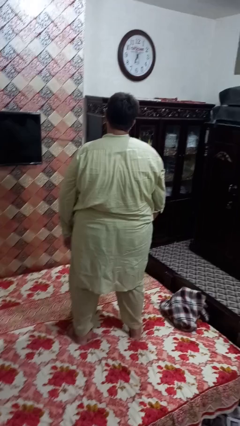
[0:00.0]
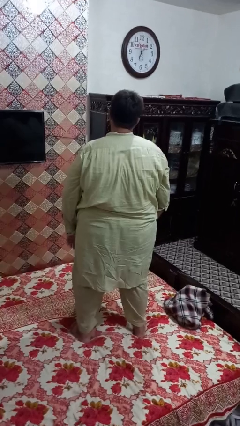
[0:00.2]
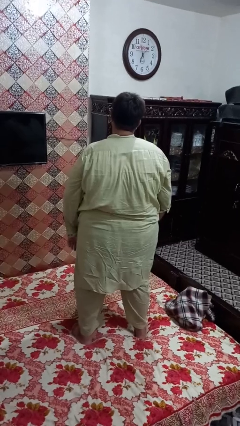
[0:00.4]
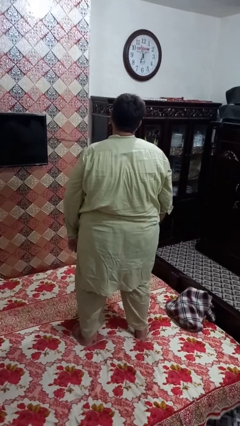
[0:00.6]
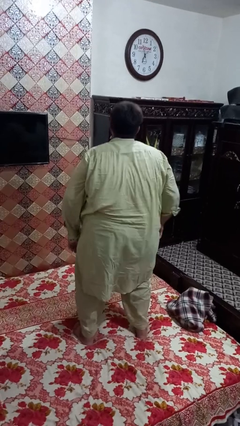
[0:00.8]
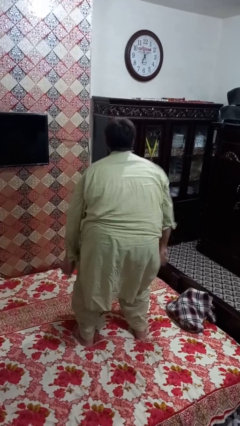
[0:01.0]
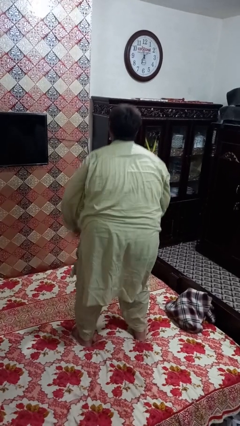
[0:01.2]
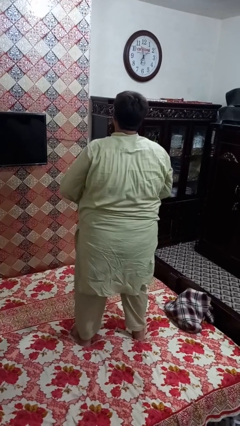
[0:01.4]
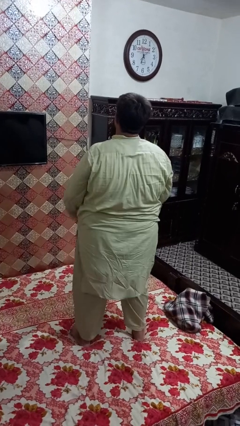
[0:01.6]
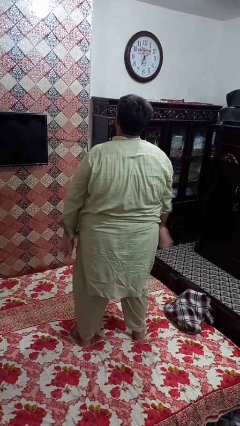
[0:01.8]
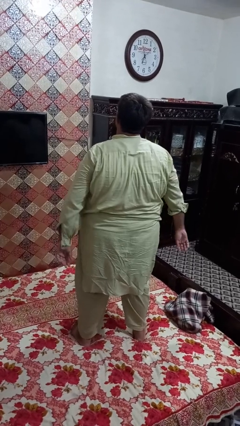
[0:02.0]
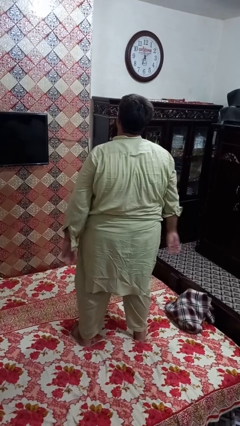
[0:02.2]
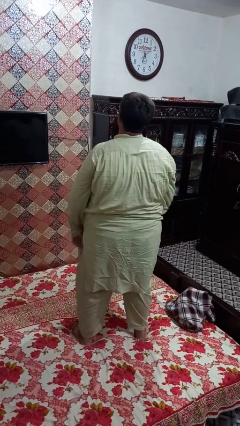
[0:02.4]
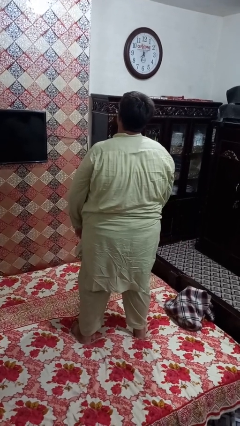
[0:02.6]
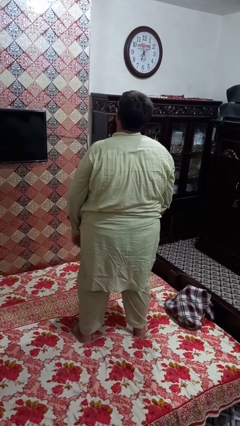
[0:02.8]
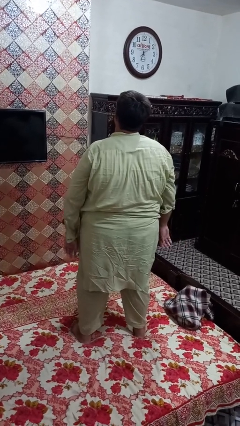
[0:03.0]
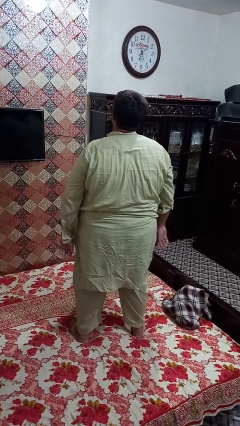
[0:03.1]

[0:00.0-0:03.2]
person jumps on bed

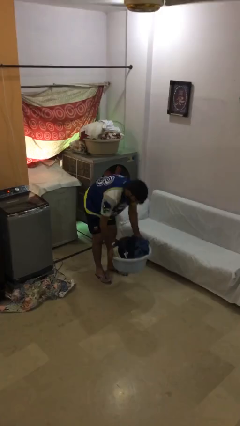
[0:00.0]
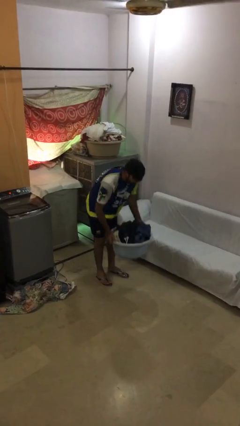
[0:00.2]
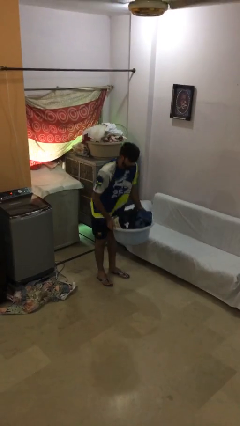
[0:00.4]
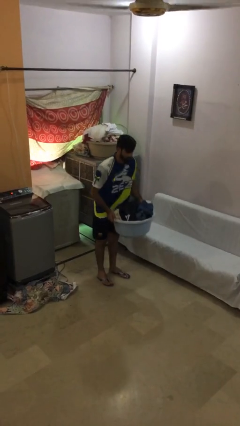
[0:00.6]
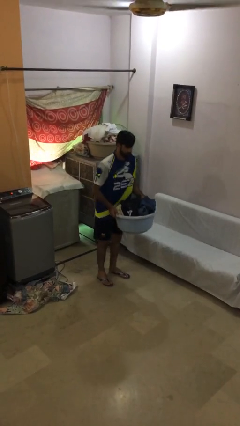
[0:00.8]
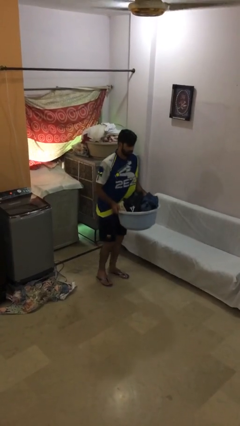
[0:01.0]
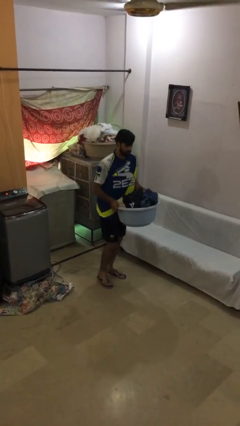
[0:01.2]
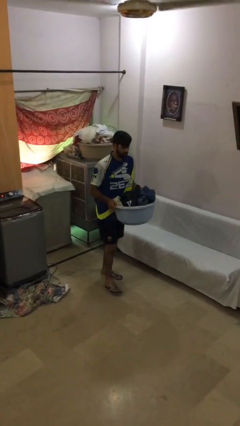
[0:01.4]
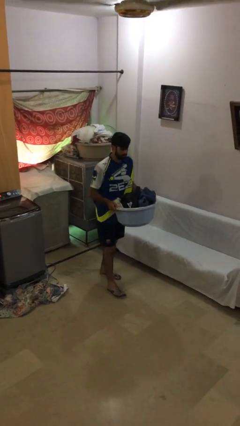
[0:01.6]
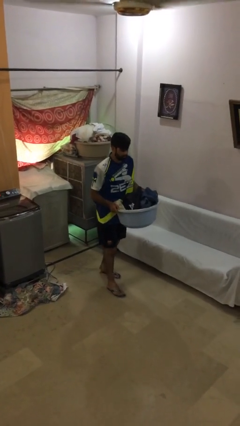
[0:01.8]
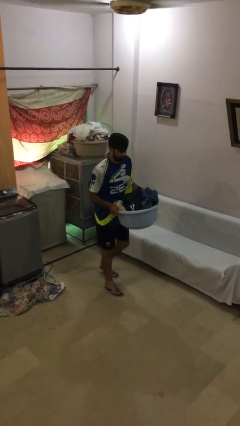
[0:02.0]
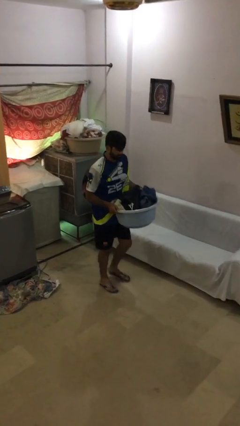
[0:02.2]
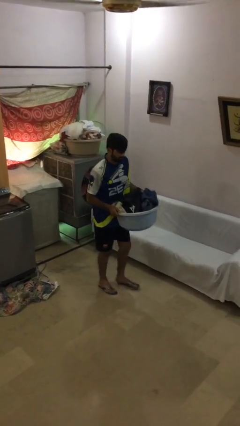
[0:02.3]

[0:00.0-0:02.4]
person carries heavy object

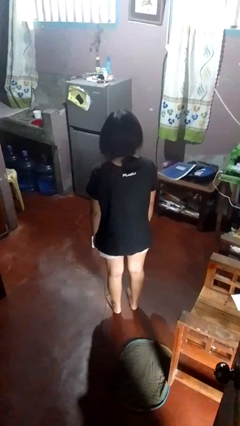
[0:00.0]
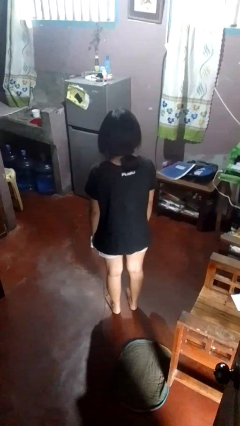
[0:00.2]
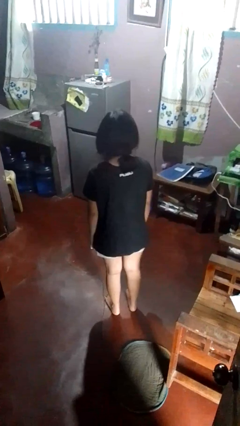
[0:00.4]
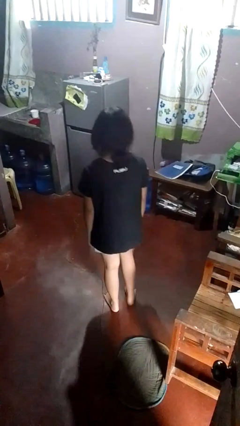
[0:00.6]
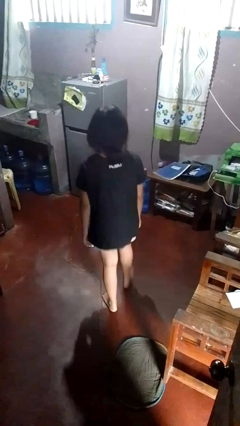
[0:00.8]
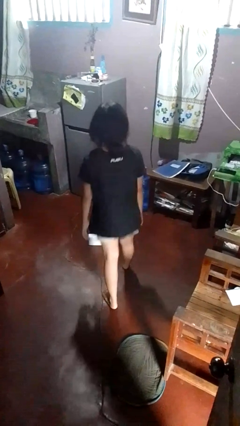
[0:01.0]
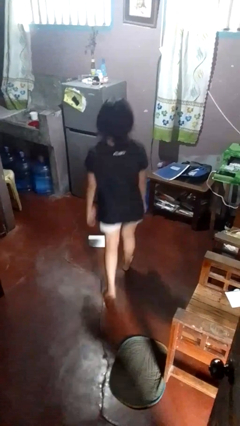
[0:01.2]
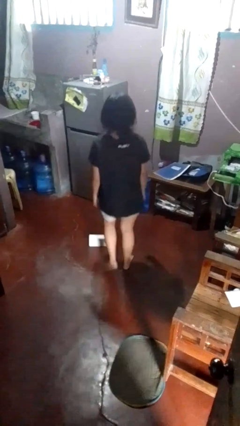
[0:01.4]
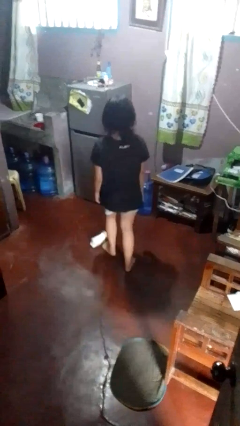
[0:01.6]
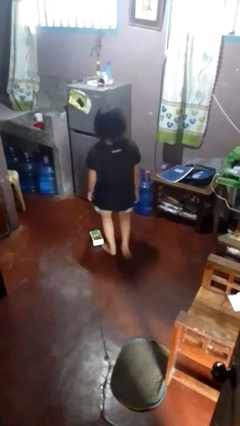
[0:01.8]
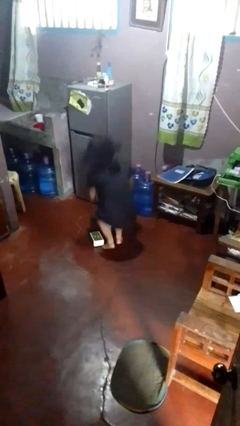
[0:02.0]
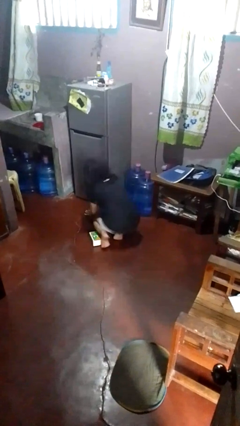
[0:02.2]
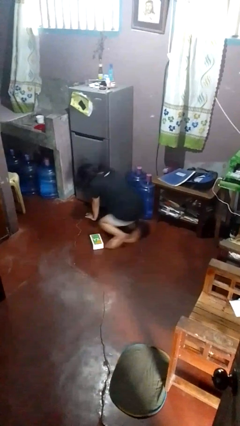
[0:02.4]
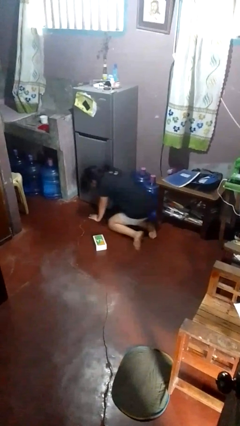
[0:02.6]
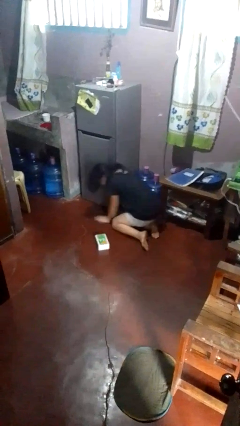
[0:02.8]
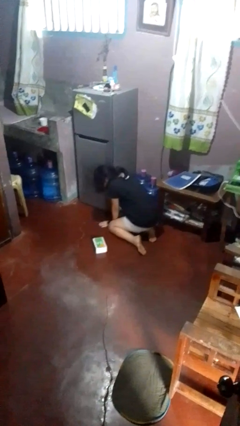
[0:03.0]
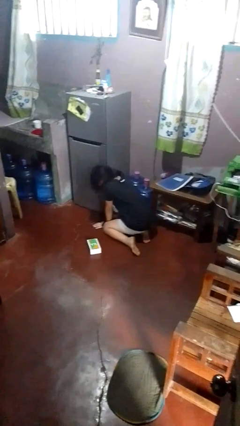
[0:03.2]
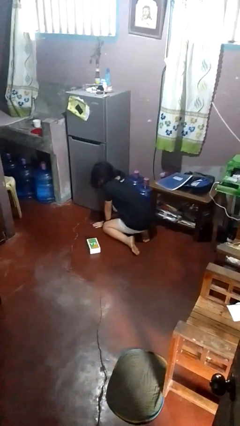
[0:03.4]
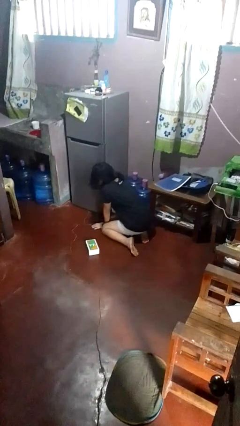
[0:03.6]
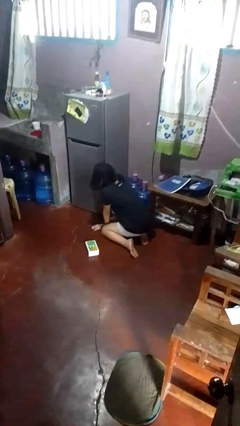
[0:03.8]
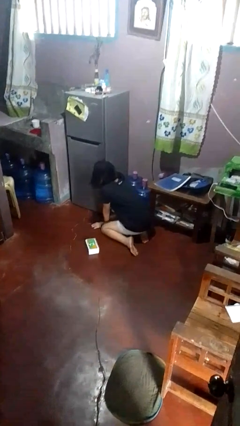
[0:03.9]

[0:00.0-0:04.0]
person trips on object on floor

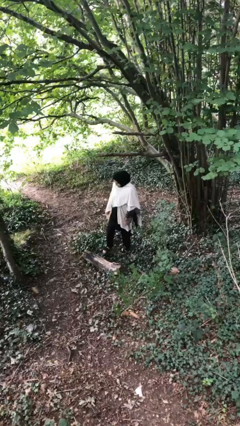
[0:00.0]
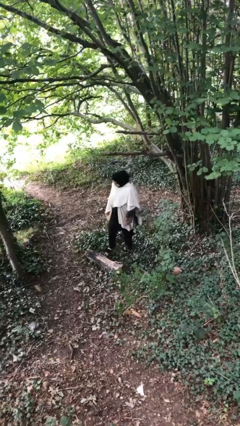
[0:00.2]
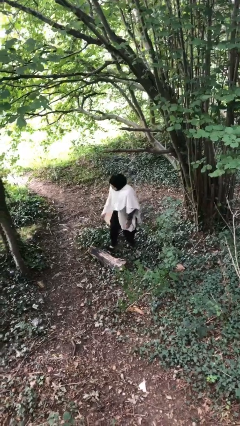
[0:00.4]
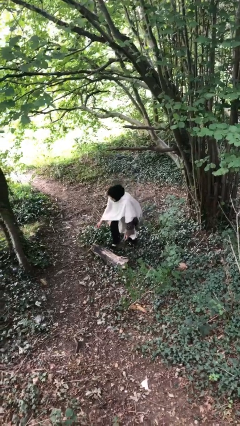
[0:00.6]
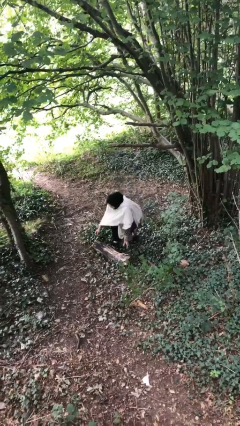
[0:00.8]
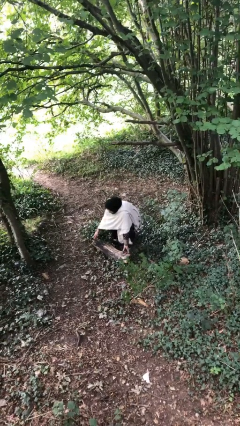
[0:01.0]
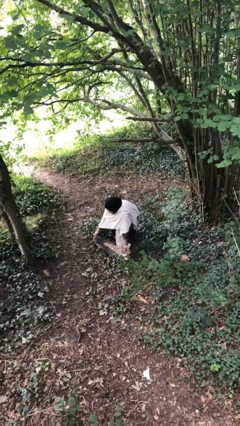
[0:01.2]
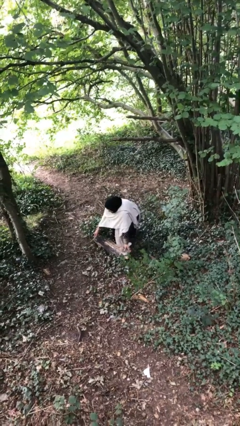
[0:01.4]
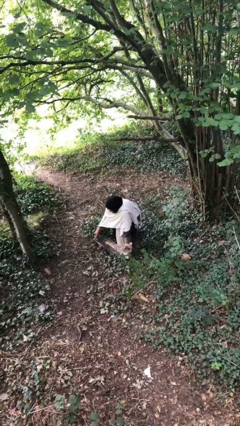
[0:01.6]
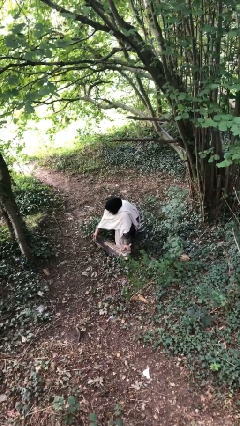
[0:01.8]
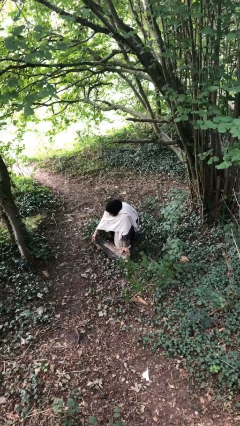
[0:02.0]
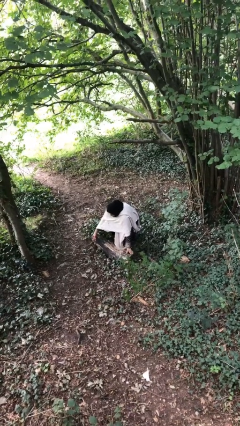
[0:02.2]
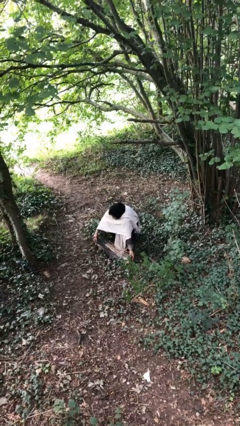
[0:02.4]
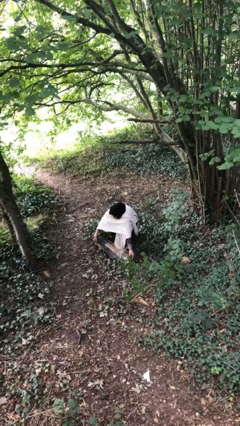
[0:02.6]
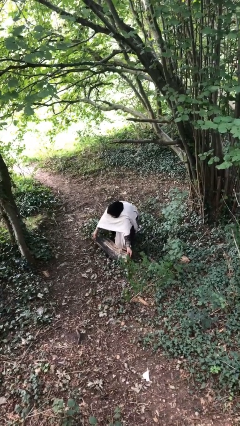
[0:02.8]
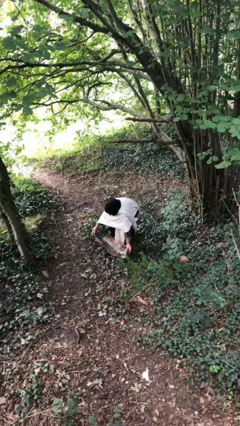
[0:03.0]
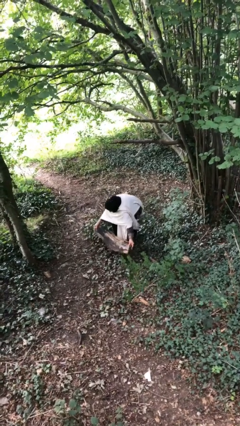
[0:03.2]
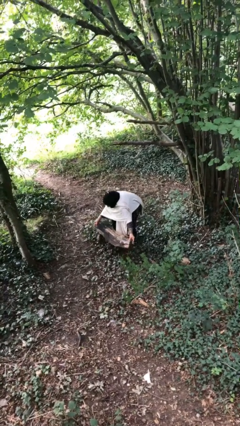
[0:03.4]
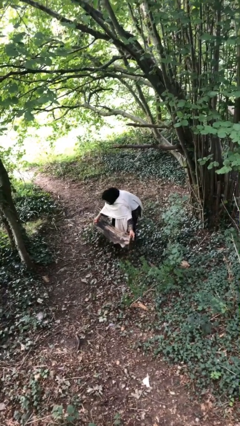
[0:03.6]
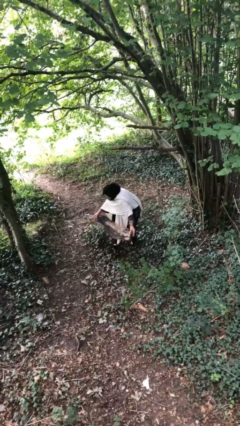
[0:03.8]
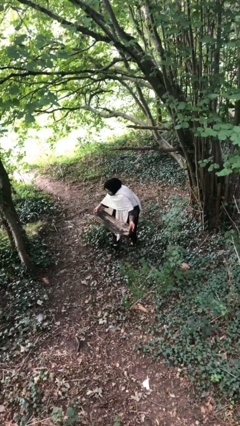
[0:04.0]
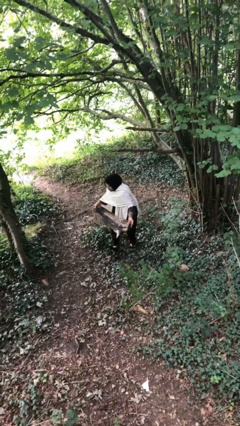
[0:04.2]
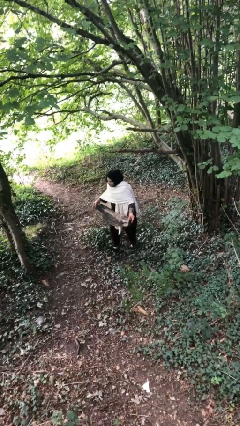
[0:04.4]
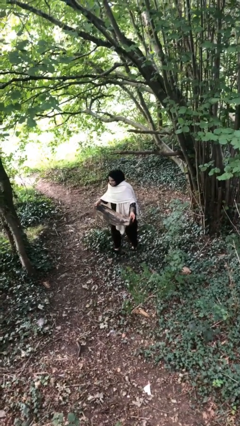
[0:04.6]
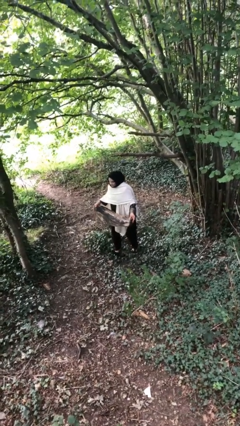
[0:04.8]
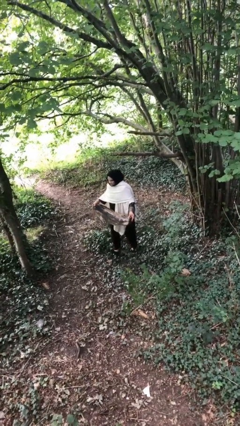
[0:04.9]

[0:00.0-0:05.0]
person picks up object from floor

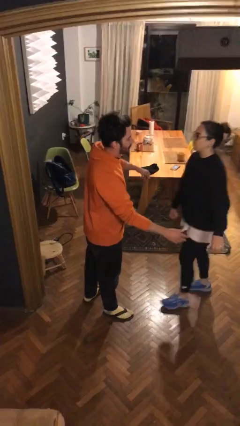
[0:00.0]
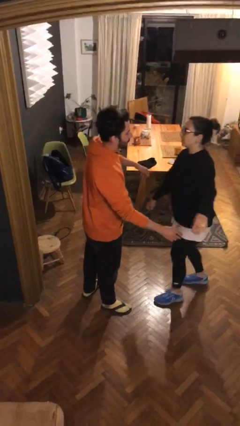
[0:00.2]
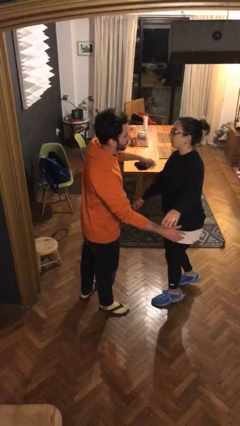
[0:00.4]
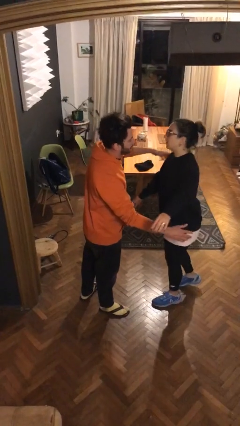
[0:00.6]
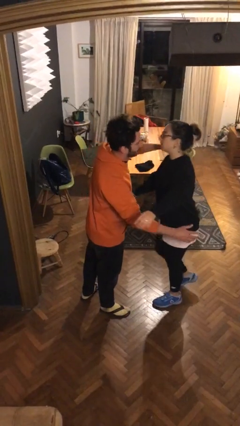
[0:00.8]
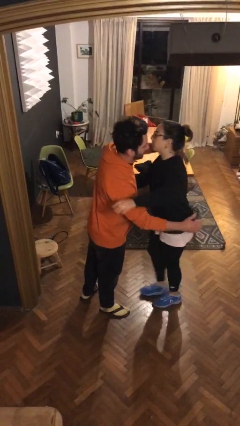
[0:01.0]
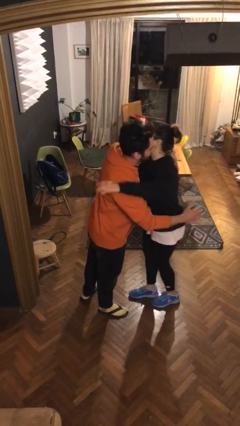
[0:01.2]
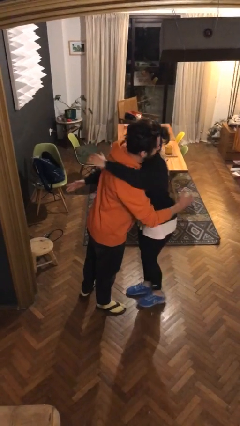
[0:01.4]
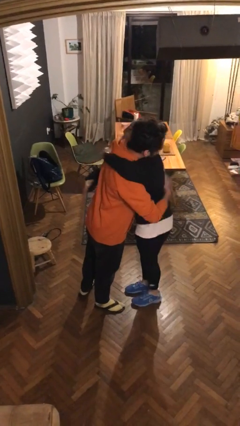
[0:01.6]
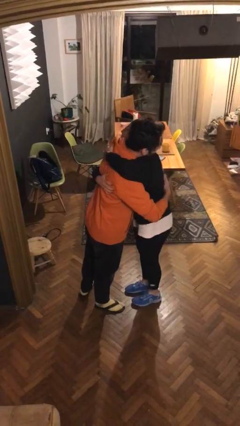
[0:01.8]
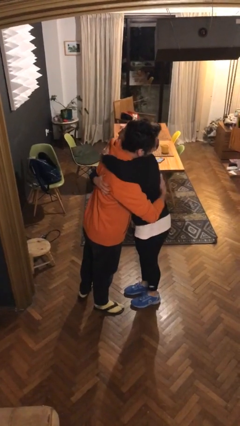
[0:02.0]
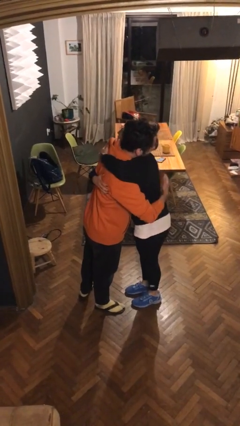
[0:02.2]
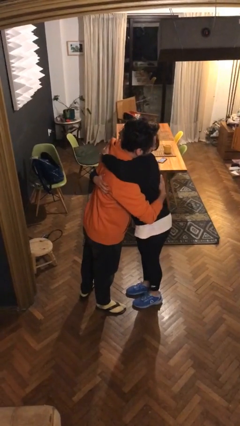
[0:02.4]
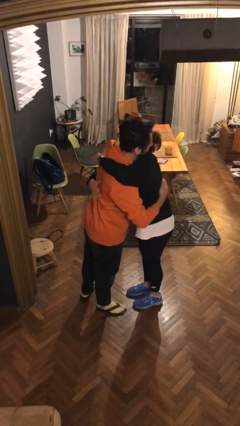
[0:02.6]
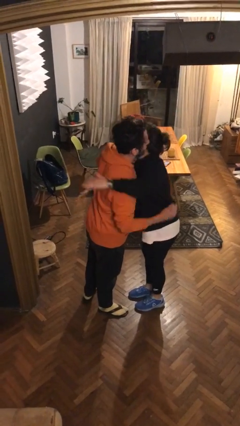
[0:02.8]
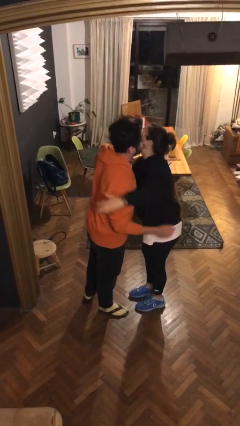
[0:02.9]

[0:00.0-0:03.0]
person embraces person

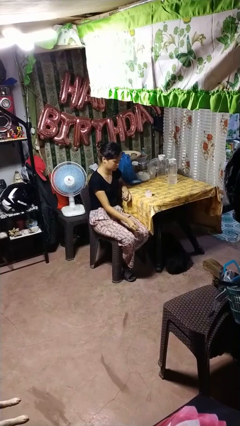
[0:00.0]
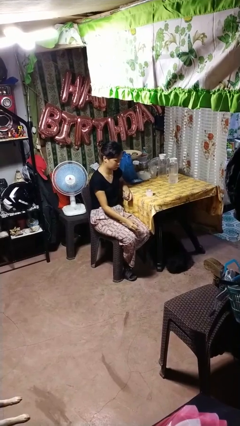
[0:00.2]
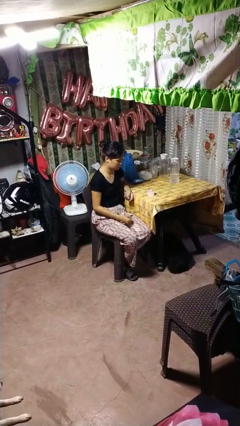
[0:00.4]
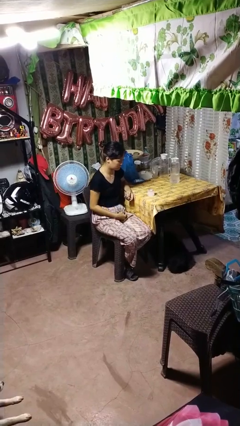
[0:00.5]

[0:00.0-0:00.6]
person lights candle
